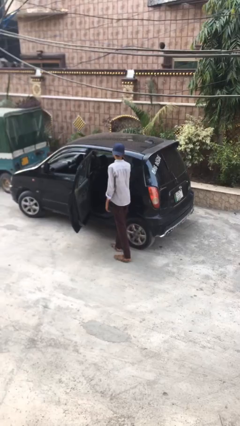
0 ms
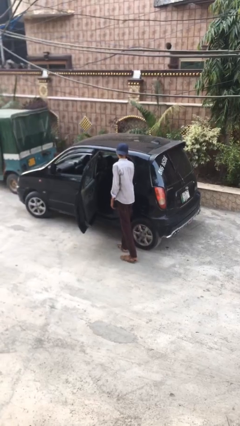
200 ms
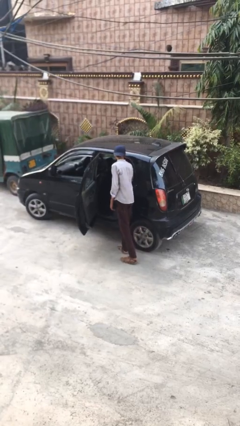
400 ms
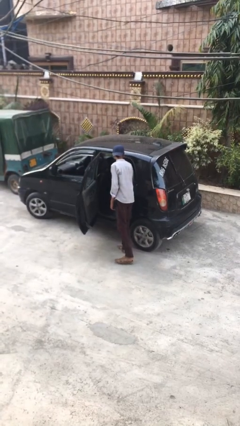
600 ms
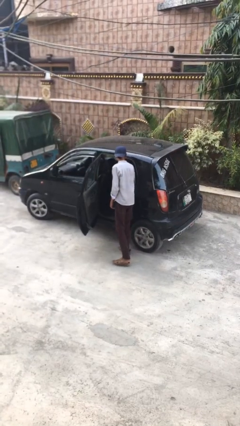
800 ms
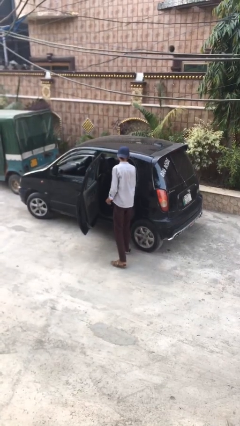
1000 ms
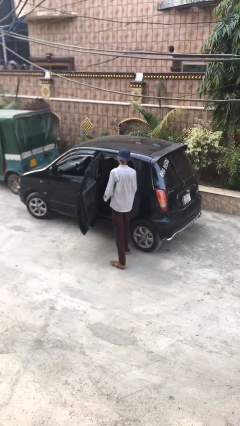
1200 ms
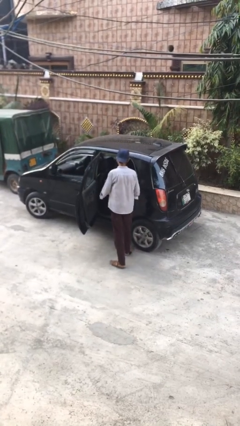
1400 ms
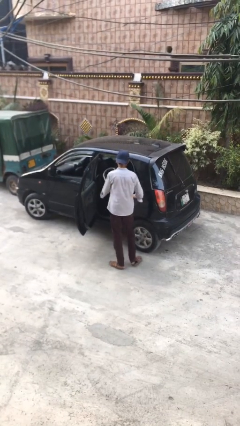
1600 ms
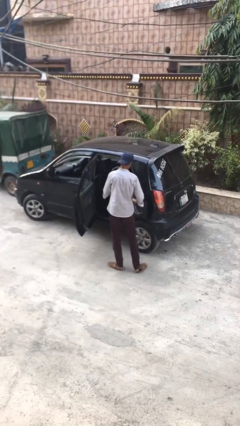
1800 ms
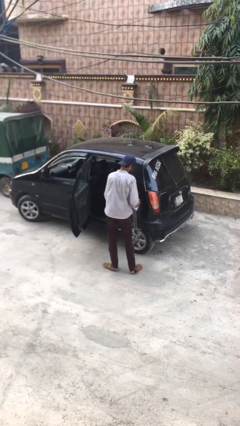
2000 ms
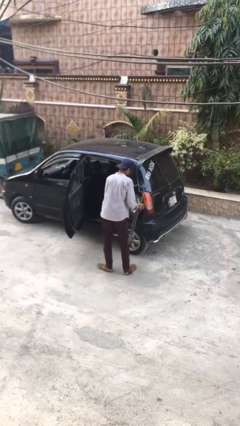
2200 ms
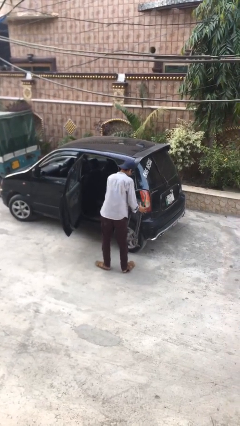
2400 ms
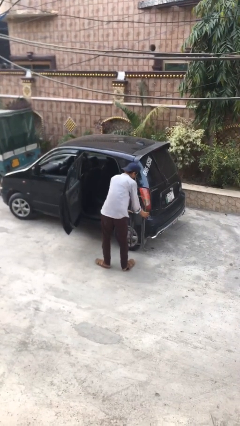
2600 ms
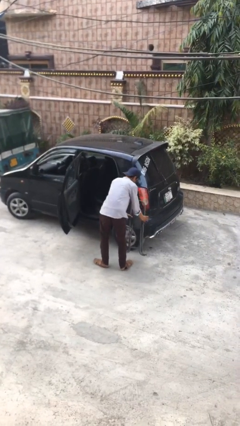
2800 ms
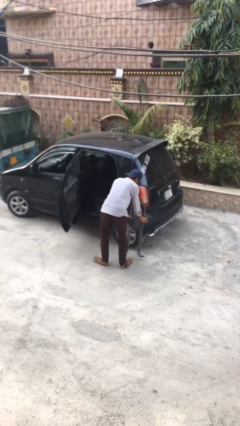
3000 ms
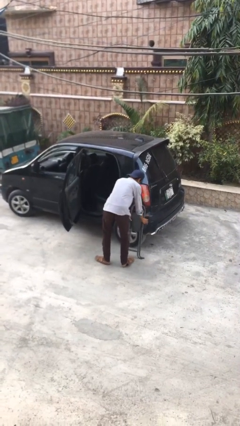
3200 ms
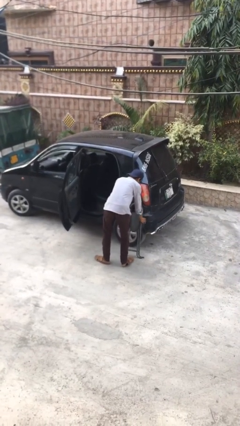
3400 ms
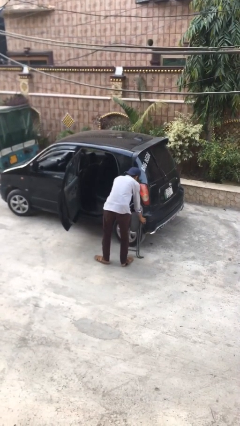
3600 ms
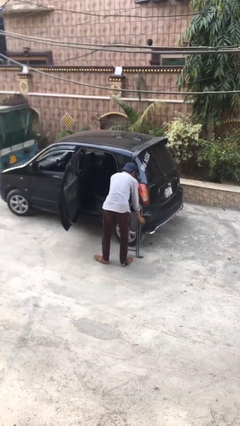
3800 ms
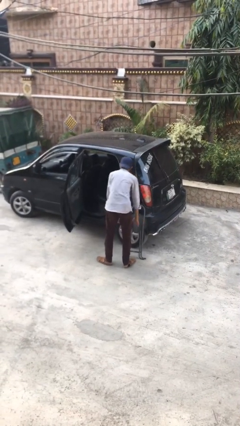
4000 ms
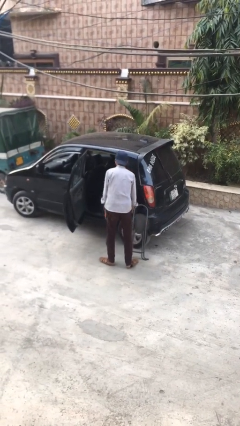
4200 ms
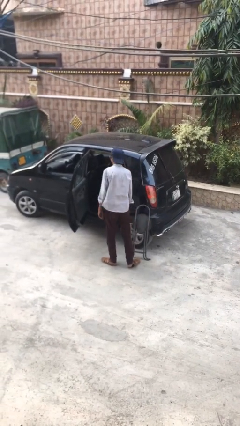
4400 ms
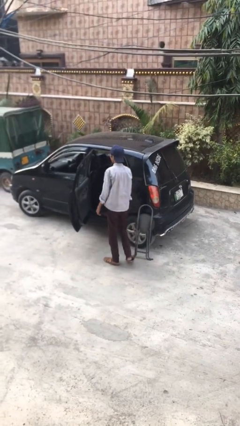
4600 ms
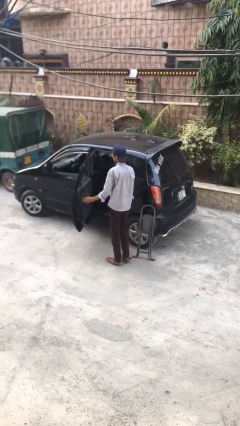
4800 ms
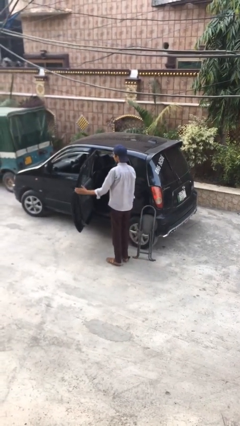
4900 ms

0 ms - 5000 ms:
person unloads car

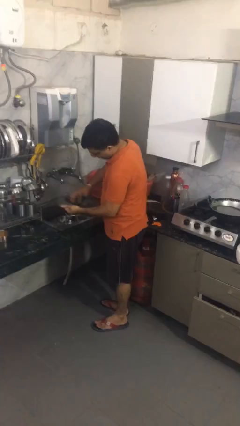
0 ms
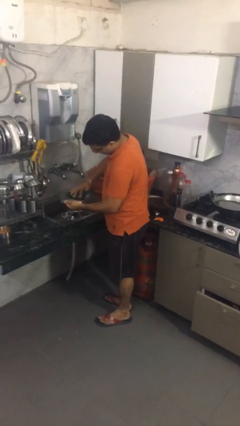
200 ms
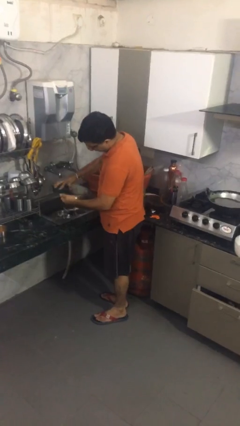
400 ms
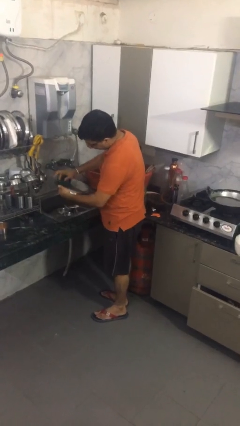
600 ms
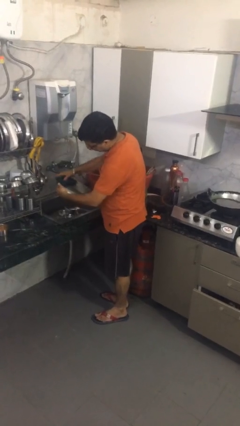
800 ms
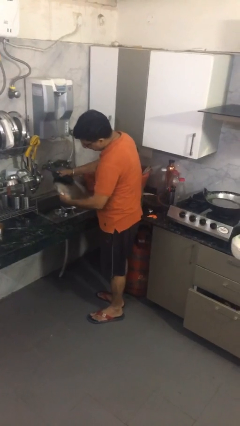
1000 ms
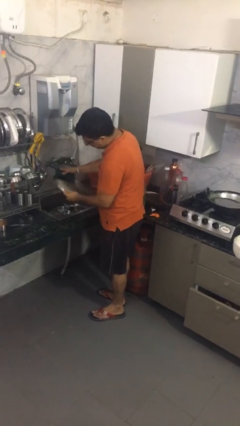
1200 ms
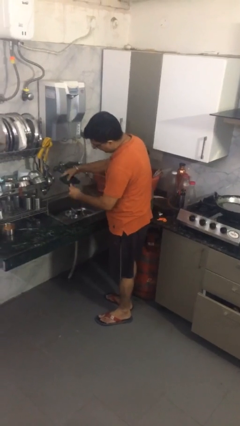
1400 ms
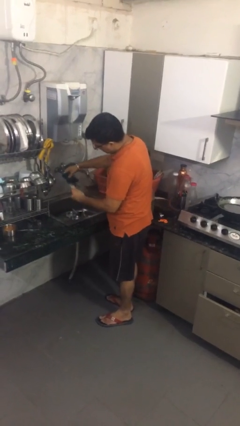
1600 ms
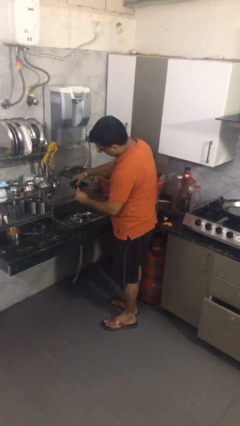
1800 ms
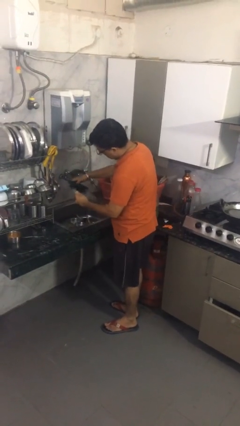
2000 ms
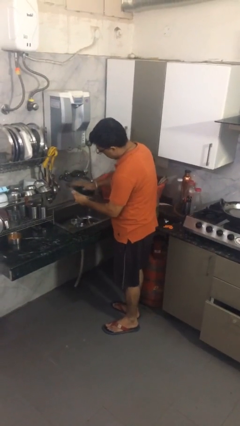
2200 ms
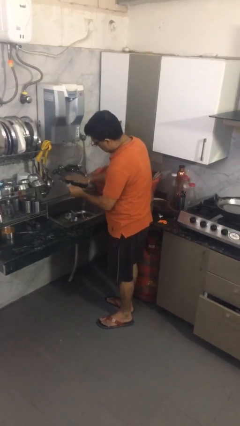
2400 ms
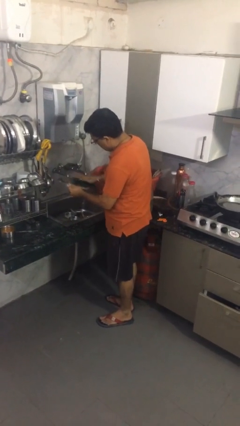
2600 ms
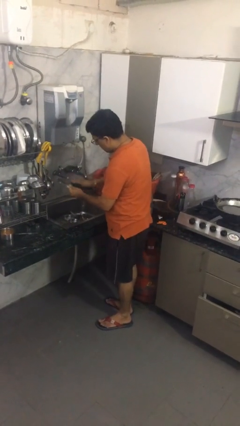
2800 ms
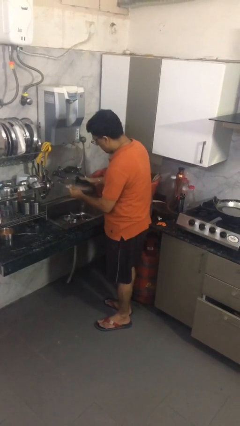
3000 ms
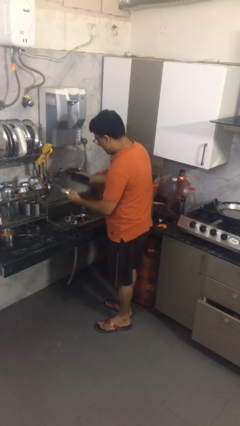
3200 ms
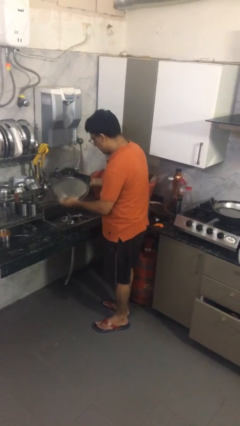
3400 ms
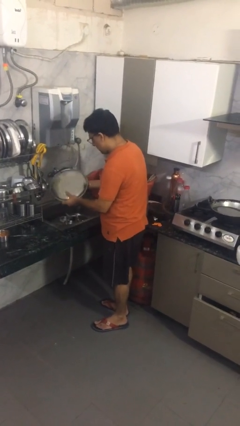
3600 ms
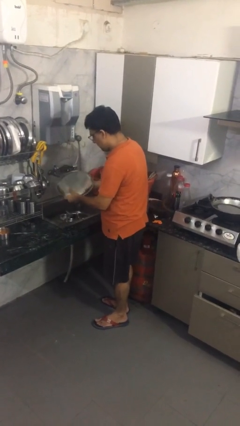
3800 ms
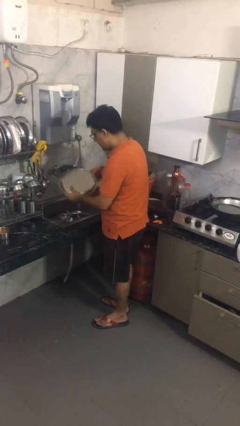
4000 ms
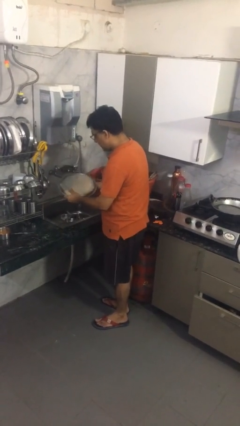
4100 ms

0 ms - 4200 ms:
person washes dish

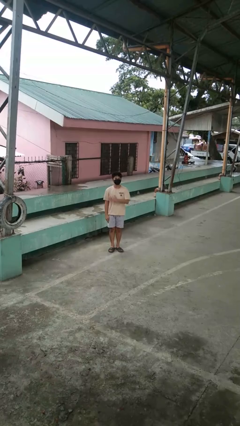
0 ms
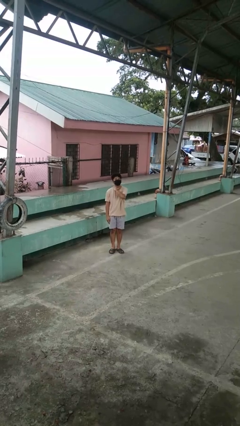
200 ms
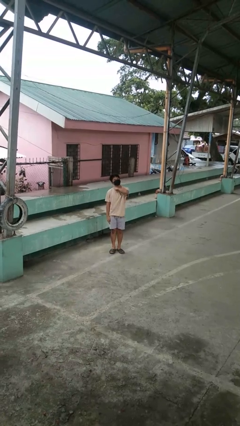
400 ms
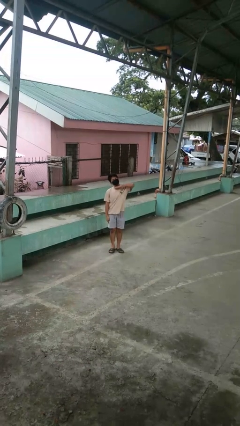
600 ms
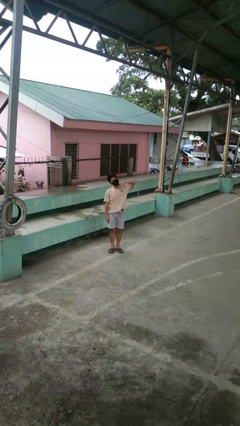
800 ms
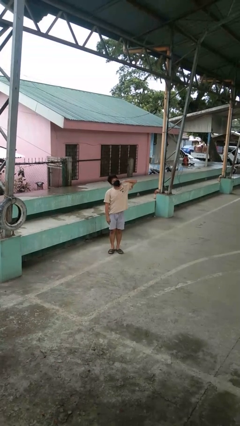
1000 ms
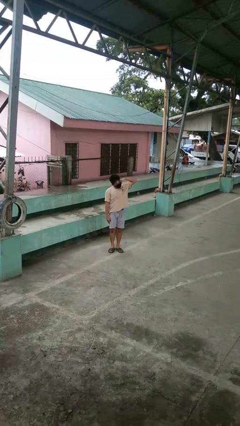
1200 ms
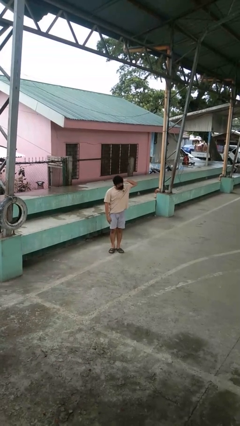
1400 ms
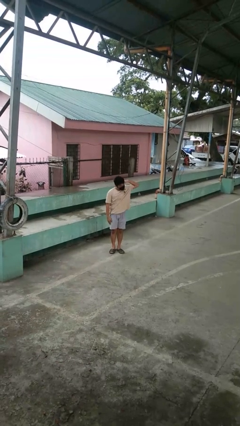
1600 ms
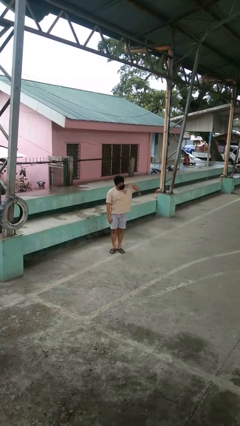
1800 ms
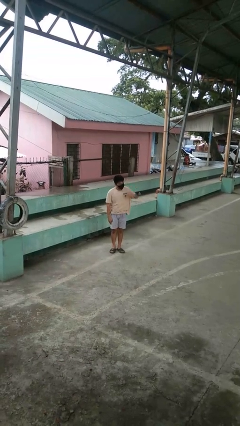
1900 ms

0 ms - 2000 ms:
person gestures cut

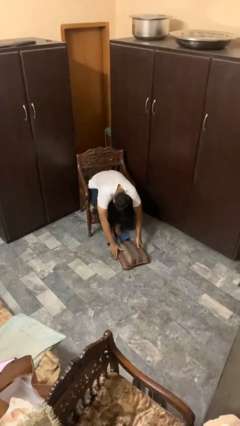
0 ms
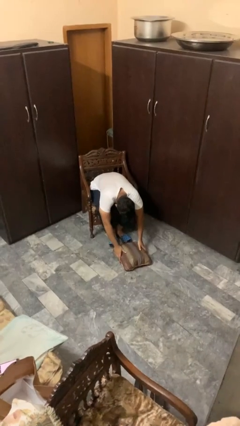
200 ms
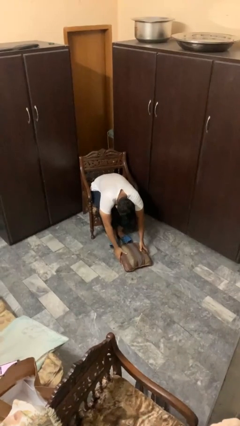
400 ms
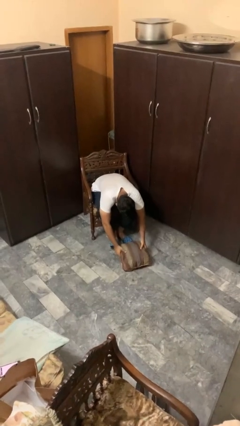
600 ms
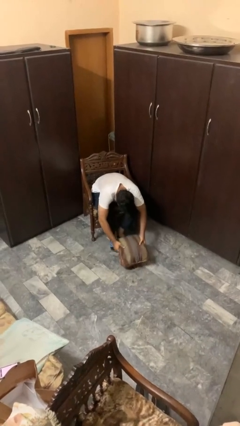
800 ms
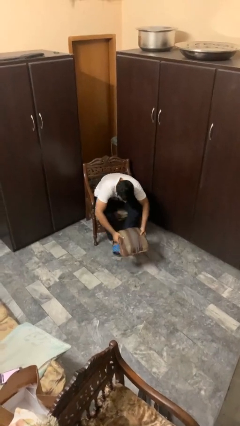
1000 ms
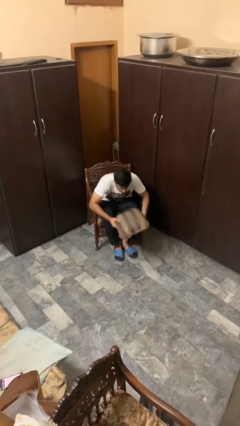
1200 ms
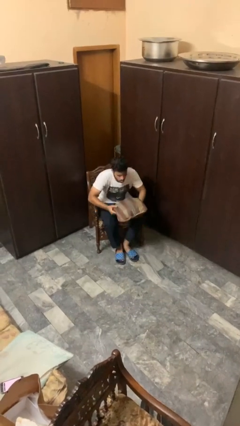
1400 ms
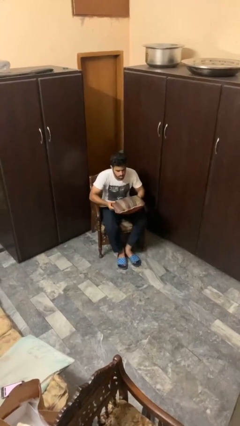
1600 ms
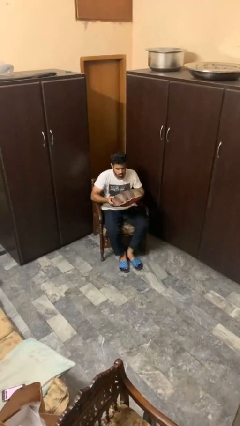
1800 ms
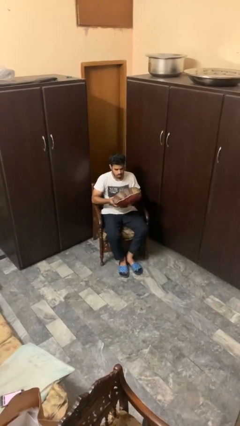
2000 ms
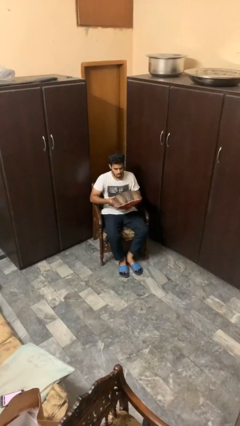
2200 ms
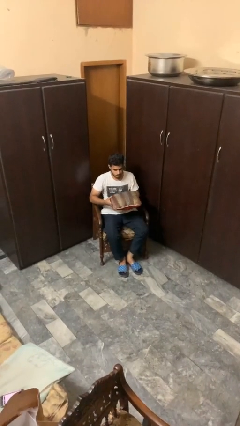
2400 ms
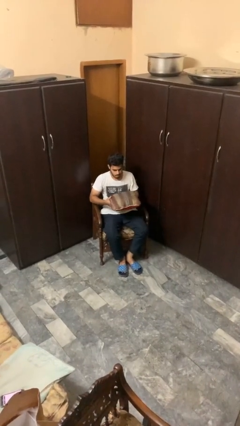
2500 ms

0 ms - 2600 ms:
person picks up object from floor

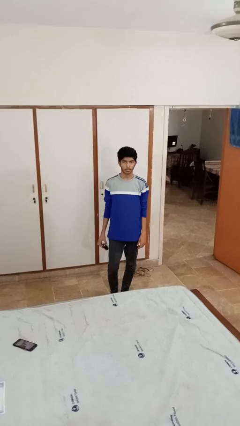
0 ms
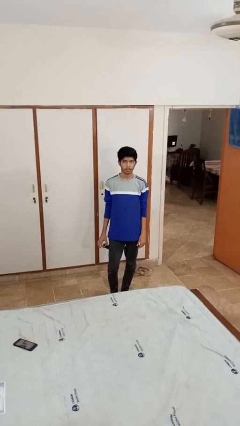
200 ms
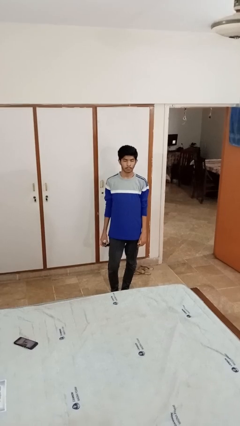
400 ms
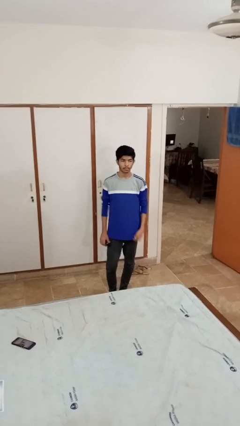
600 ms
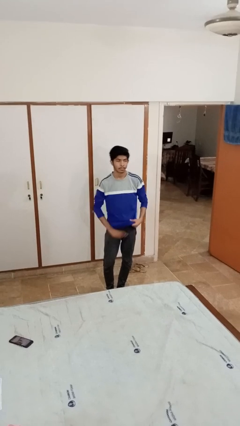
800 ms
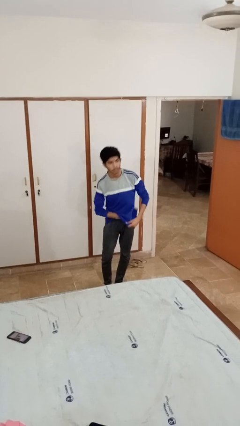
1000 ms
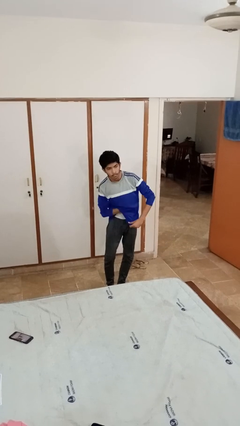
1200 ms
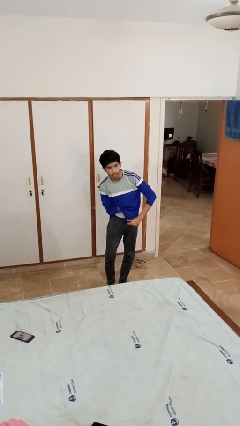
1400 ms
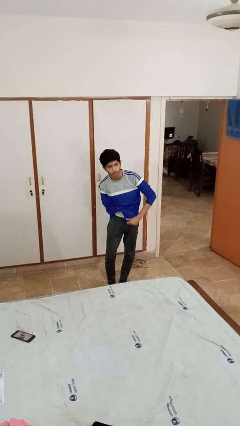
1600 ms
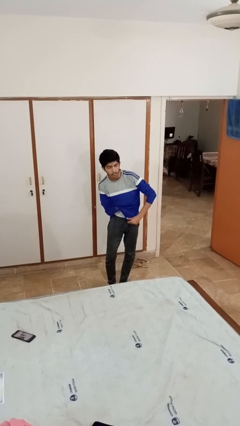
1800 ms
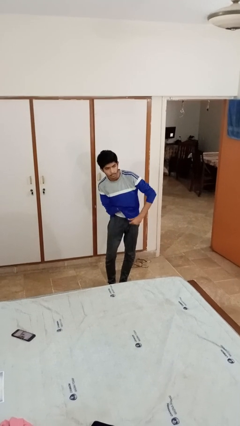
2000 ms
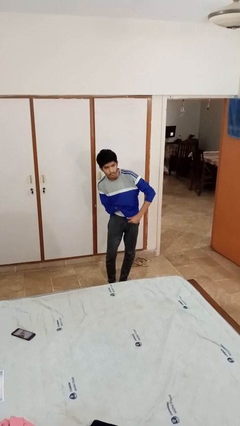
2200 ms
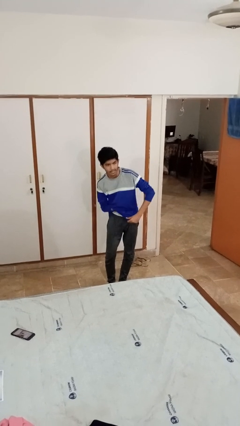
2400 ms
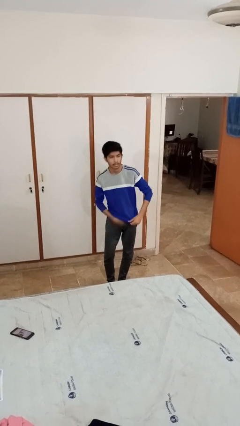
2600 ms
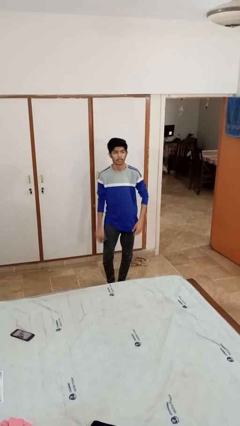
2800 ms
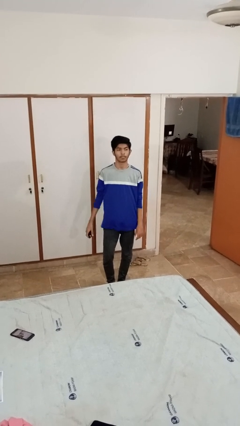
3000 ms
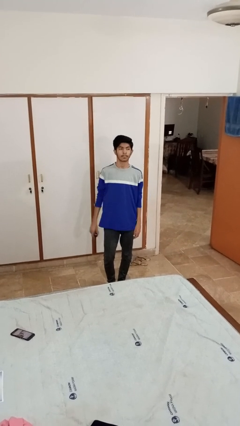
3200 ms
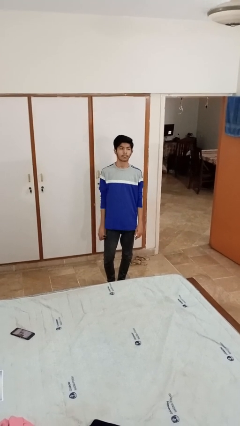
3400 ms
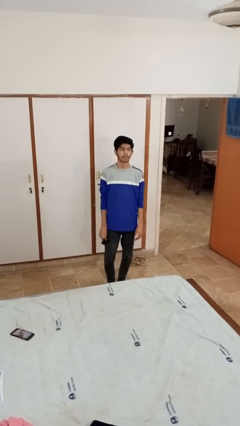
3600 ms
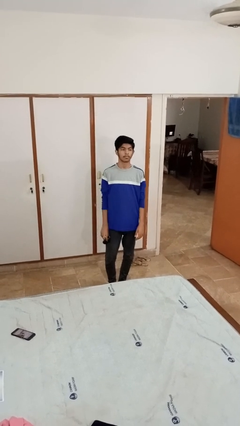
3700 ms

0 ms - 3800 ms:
person applies deodorant
